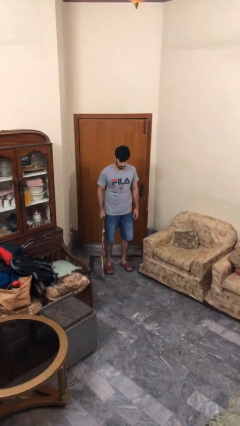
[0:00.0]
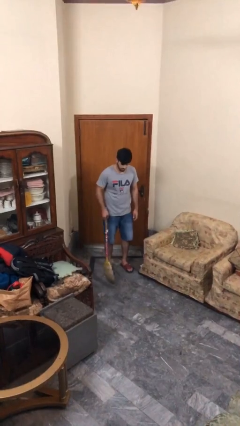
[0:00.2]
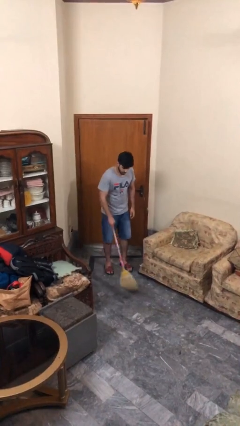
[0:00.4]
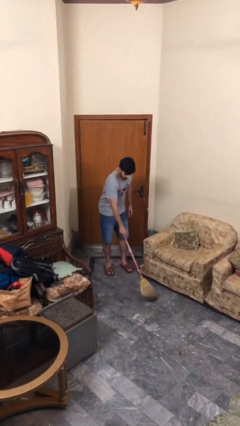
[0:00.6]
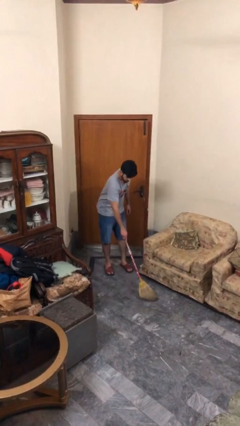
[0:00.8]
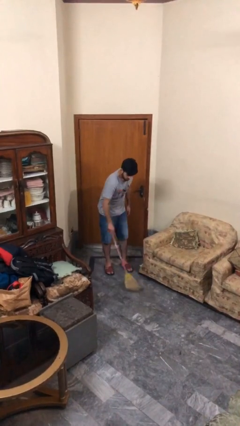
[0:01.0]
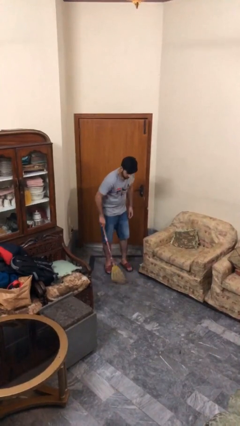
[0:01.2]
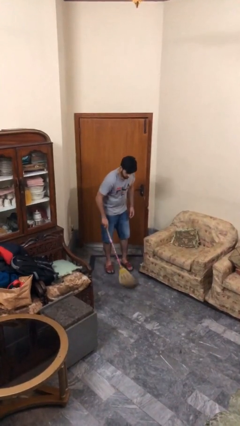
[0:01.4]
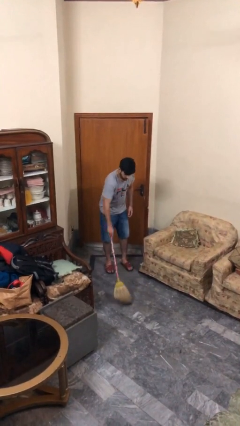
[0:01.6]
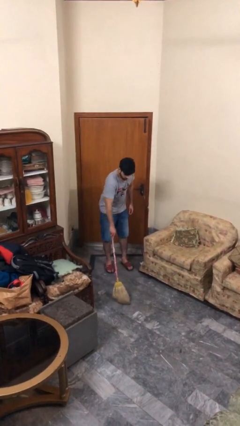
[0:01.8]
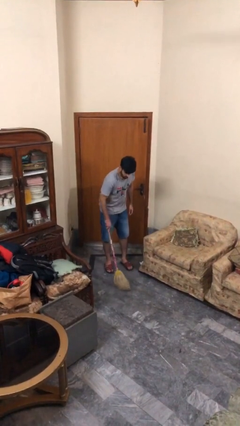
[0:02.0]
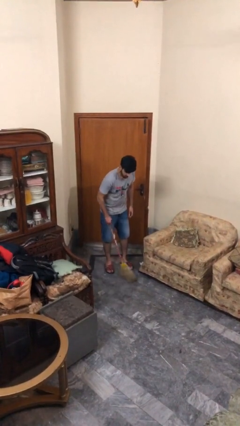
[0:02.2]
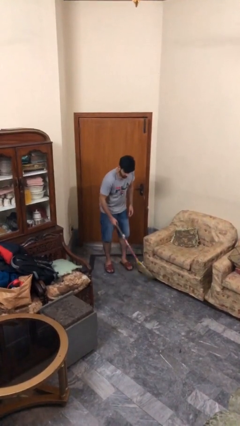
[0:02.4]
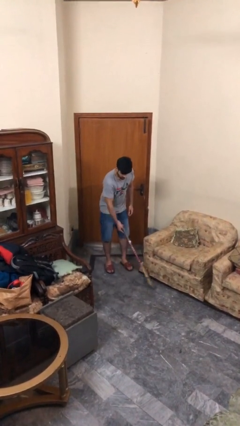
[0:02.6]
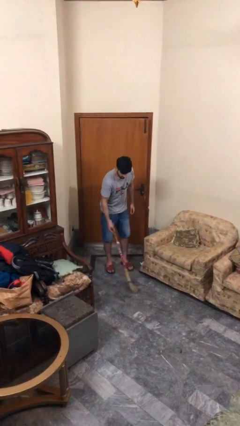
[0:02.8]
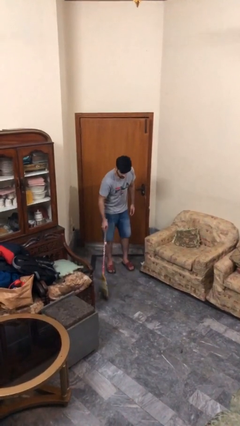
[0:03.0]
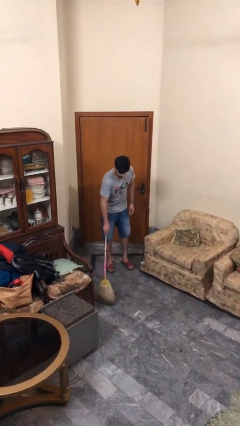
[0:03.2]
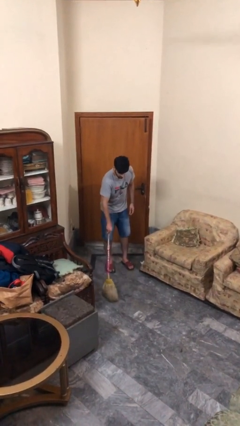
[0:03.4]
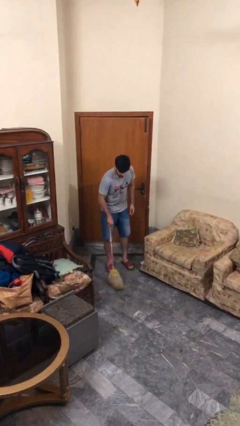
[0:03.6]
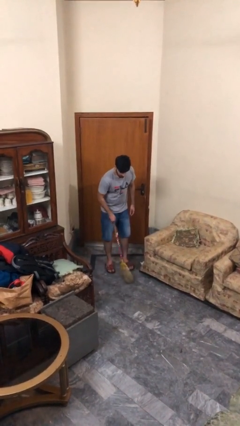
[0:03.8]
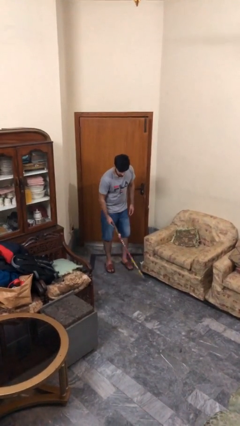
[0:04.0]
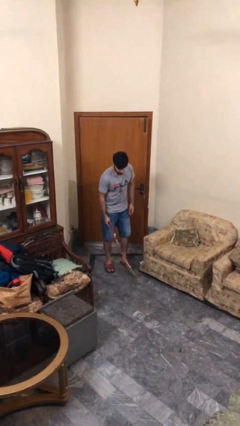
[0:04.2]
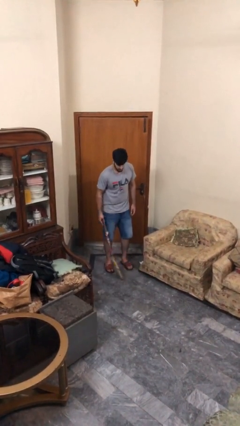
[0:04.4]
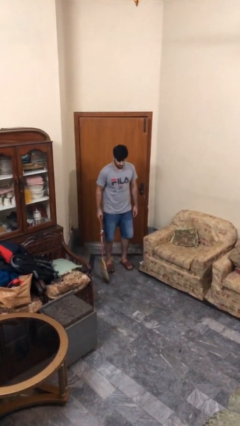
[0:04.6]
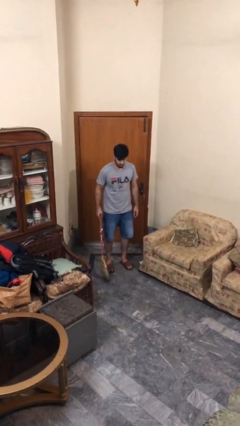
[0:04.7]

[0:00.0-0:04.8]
person sweeps floor

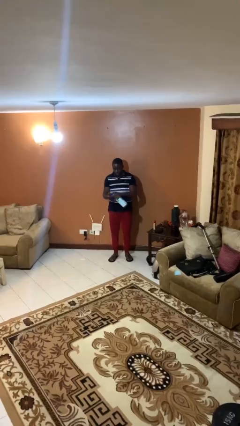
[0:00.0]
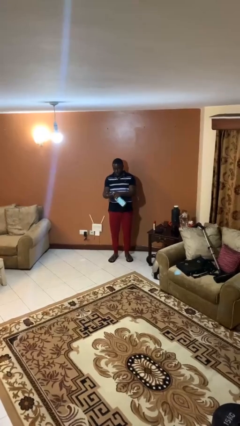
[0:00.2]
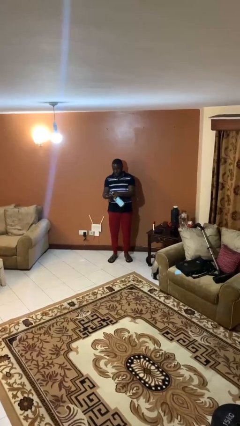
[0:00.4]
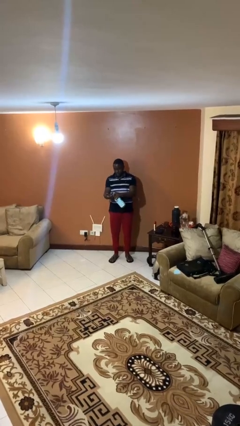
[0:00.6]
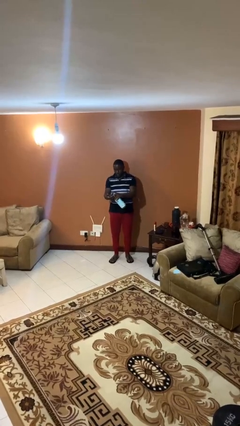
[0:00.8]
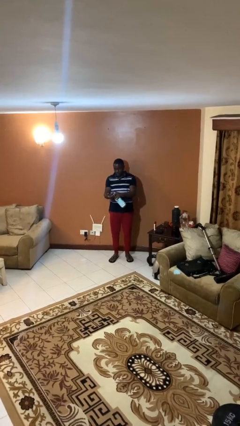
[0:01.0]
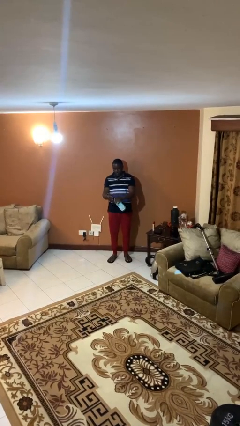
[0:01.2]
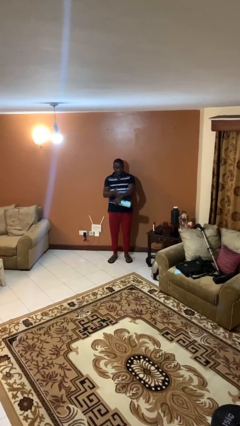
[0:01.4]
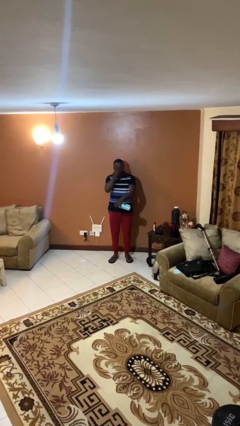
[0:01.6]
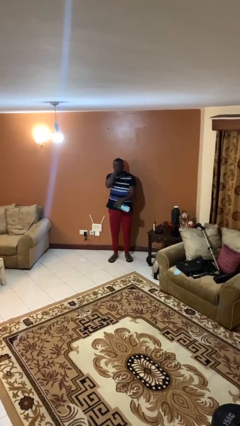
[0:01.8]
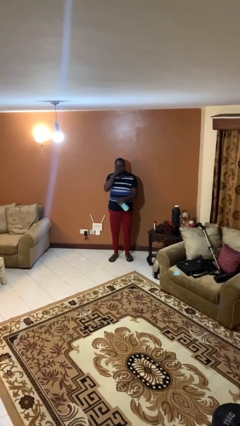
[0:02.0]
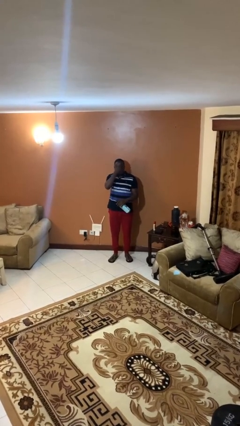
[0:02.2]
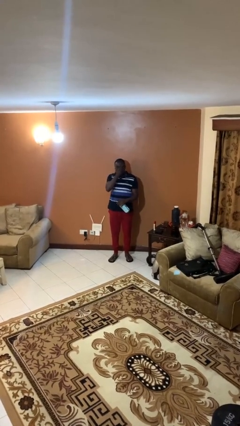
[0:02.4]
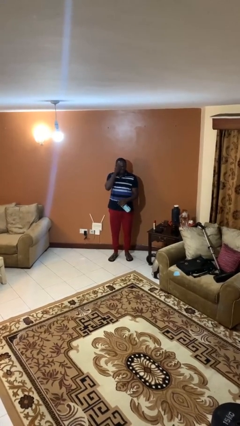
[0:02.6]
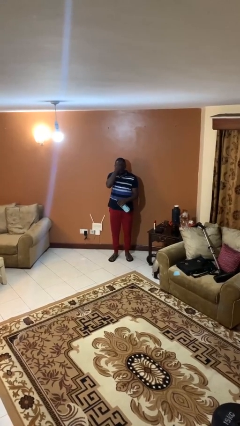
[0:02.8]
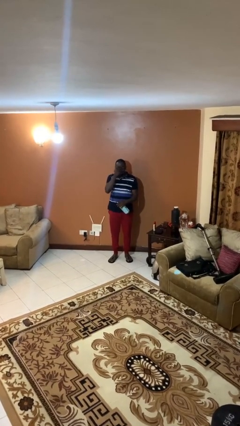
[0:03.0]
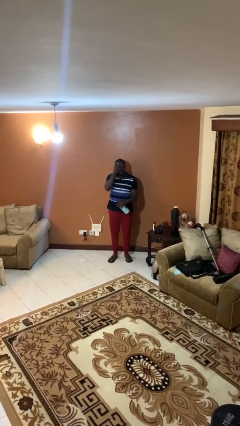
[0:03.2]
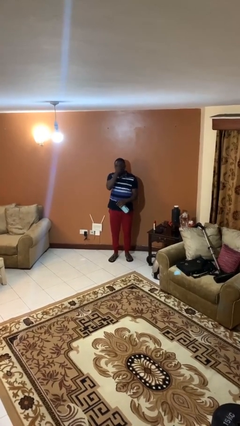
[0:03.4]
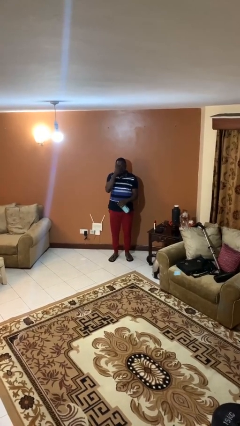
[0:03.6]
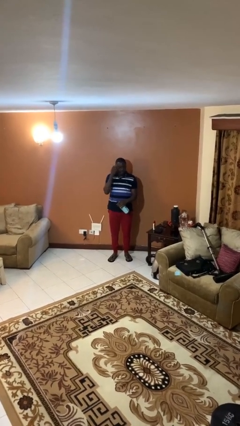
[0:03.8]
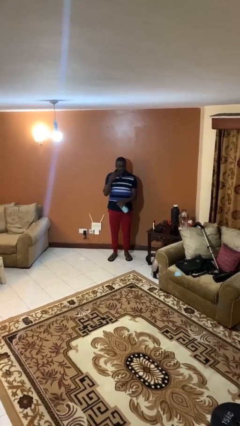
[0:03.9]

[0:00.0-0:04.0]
person applies sunscreen

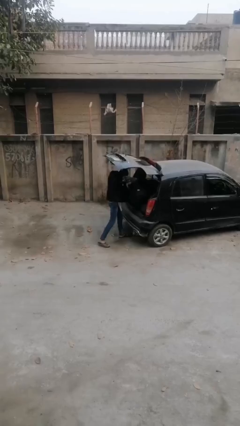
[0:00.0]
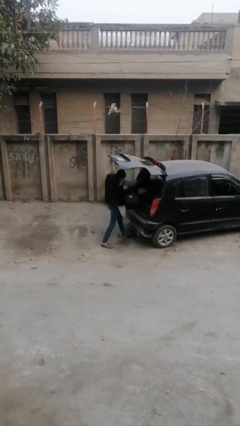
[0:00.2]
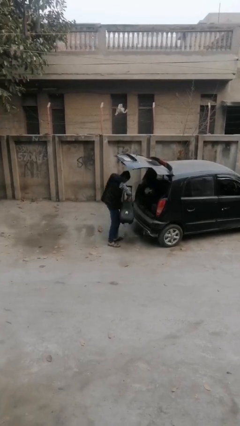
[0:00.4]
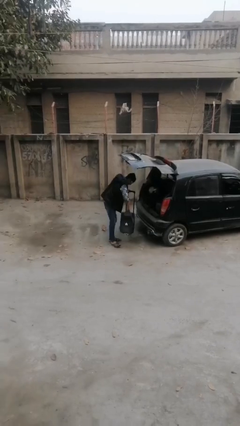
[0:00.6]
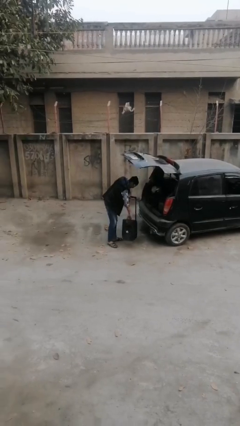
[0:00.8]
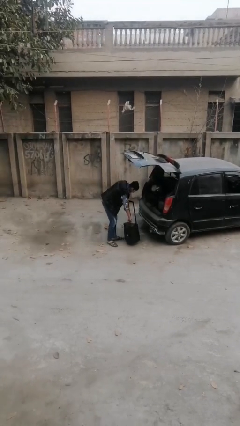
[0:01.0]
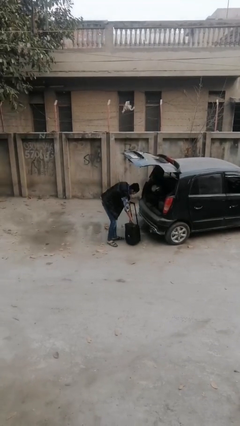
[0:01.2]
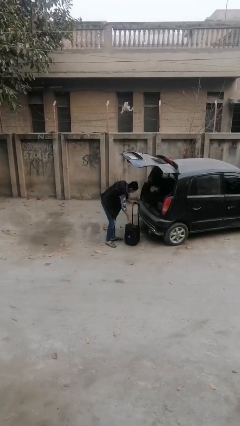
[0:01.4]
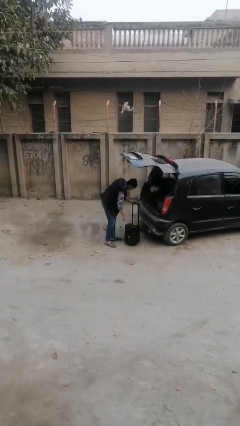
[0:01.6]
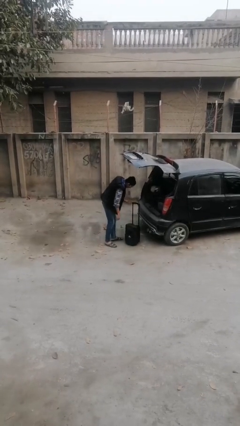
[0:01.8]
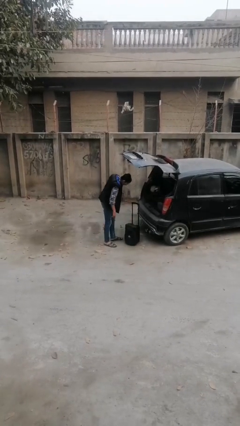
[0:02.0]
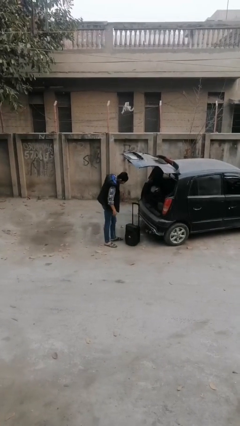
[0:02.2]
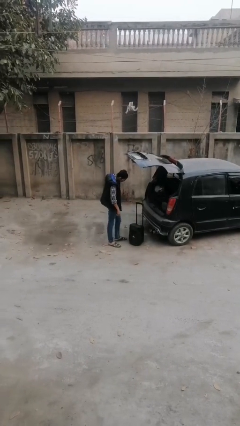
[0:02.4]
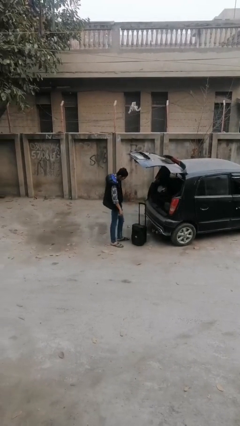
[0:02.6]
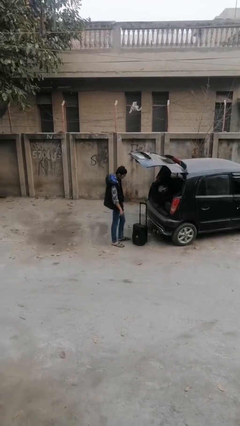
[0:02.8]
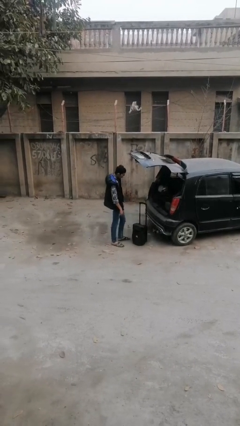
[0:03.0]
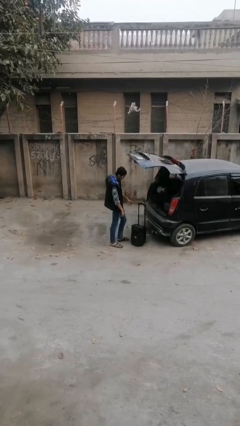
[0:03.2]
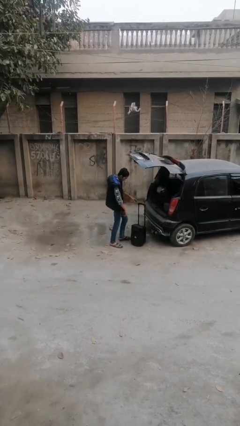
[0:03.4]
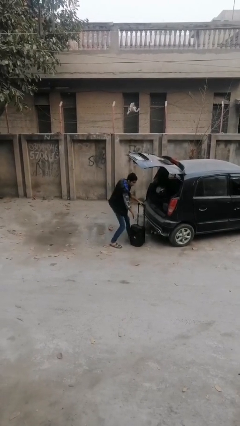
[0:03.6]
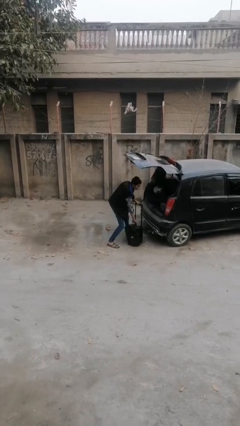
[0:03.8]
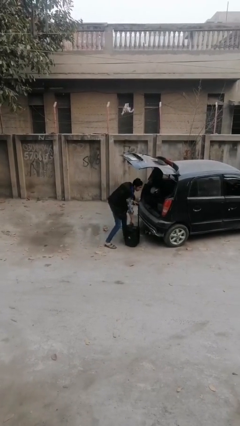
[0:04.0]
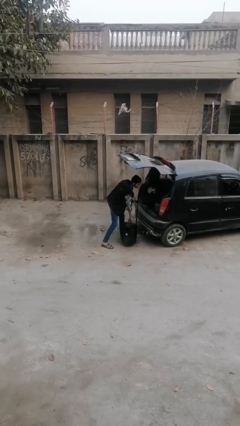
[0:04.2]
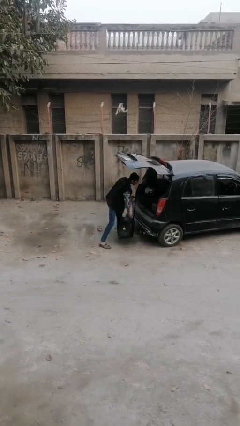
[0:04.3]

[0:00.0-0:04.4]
person unloads car

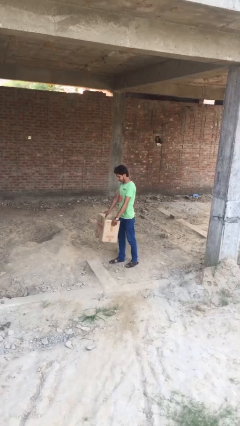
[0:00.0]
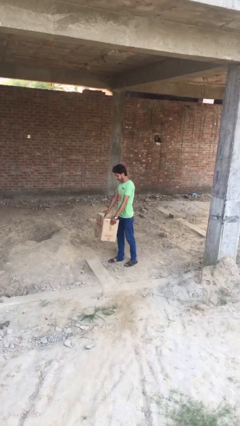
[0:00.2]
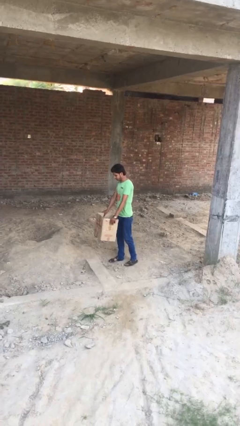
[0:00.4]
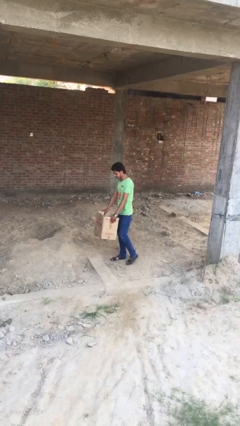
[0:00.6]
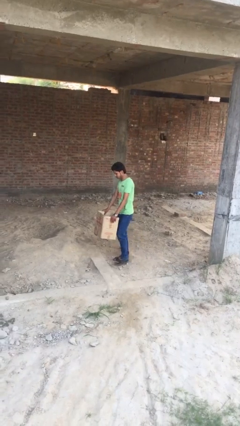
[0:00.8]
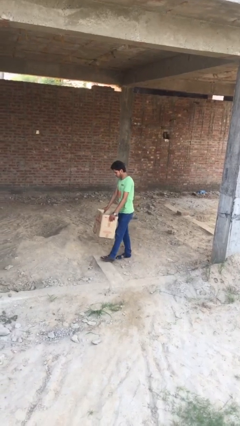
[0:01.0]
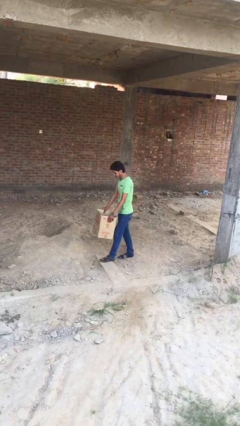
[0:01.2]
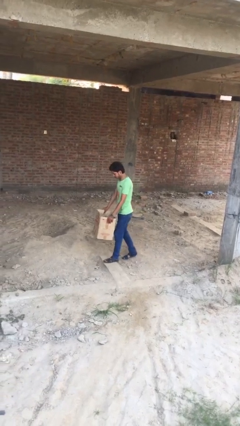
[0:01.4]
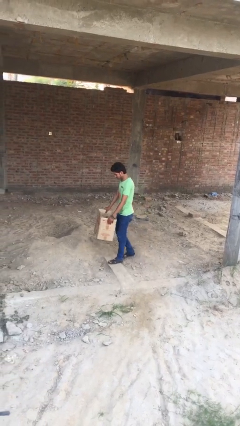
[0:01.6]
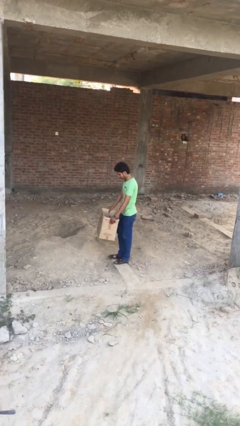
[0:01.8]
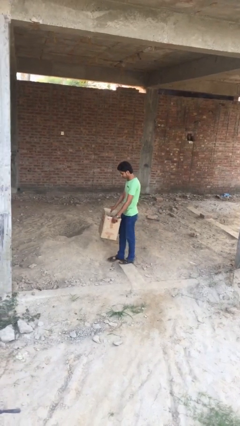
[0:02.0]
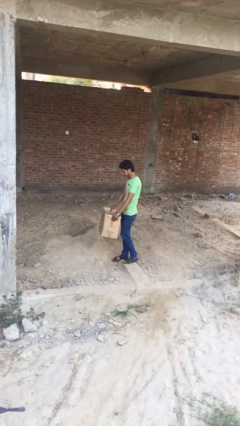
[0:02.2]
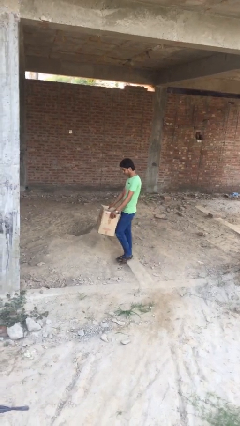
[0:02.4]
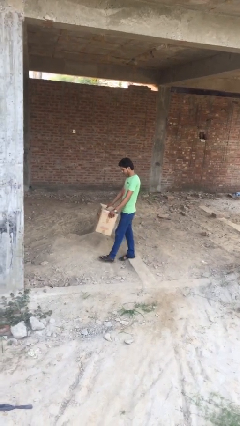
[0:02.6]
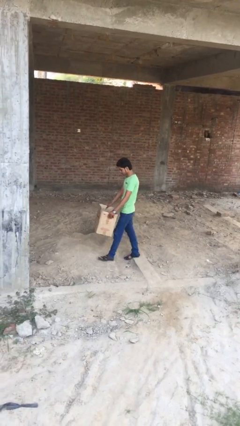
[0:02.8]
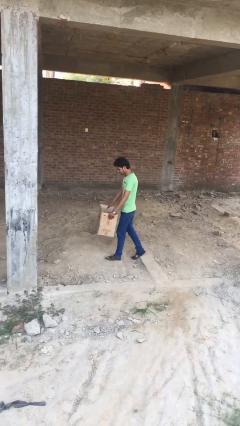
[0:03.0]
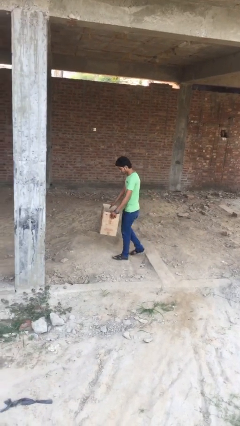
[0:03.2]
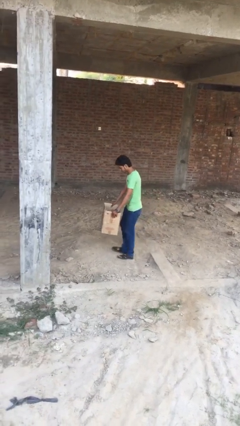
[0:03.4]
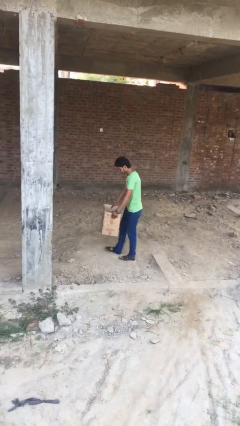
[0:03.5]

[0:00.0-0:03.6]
person carries heavy object

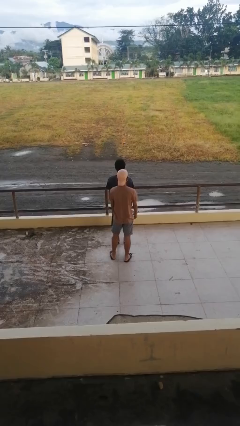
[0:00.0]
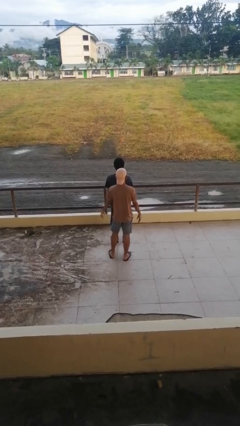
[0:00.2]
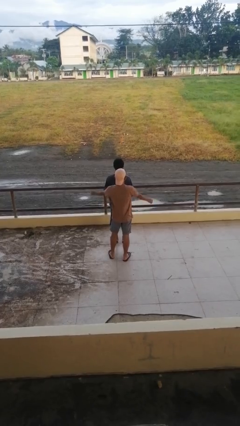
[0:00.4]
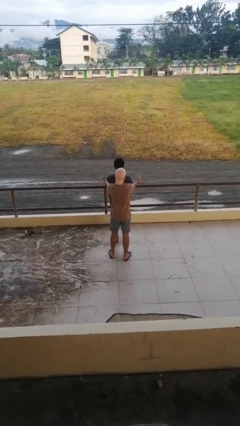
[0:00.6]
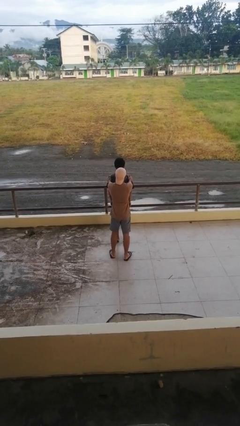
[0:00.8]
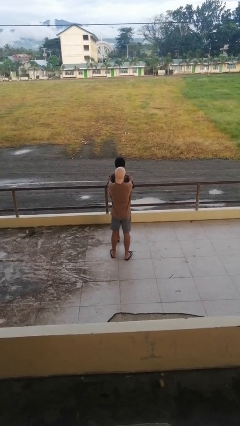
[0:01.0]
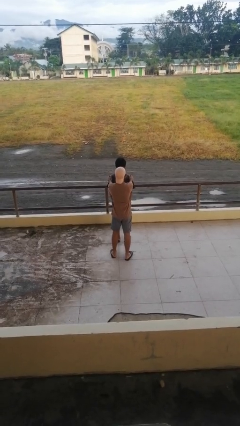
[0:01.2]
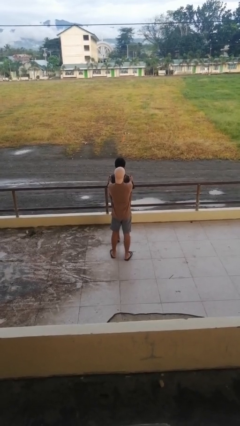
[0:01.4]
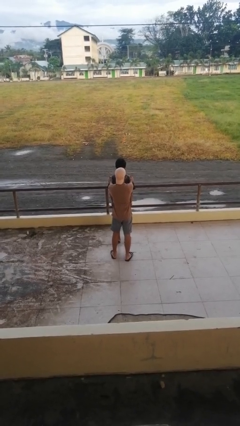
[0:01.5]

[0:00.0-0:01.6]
person pounds shoulders of person
